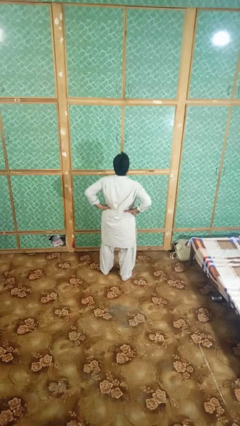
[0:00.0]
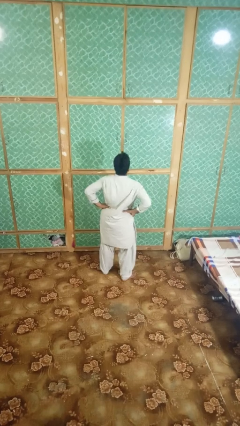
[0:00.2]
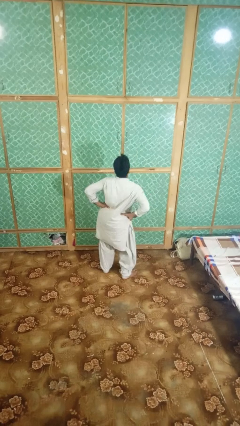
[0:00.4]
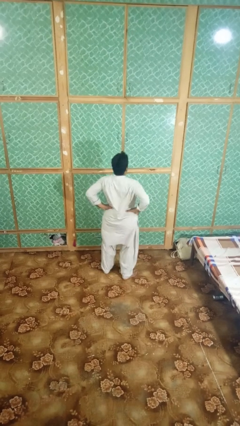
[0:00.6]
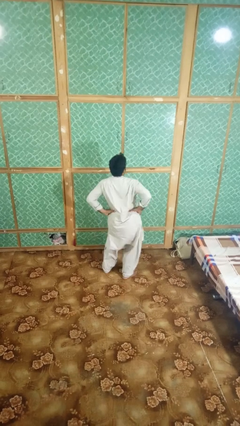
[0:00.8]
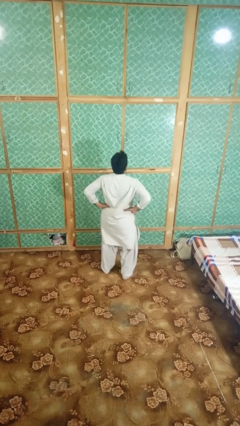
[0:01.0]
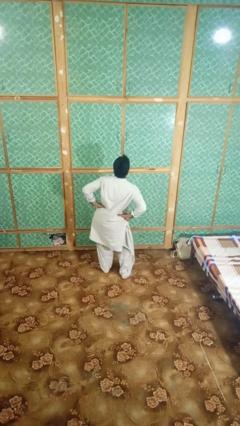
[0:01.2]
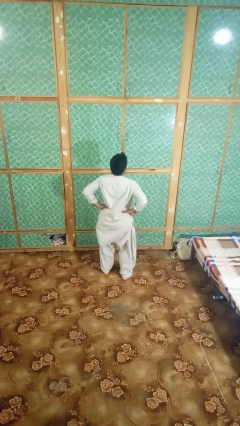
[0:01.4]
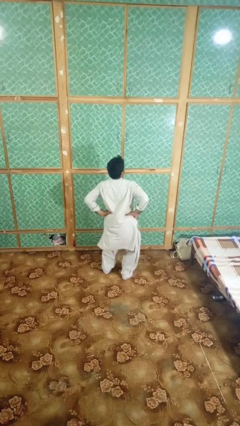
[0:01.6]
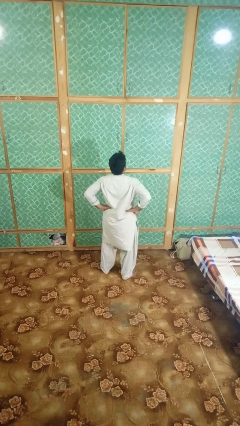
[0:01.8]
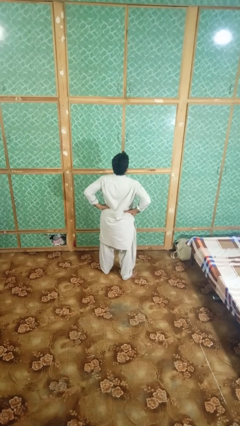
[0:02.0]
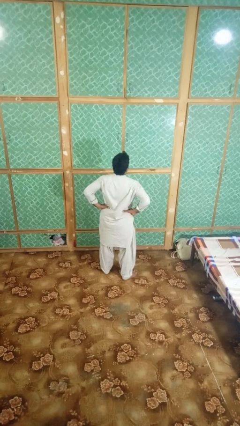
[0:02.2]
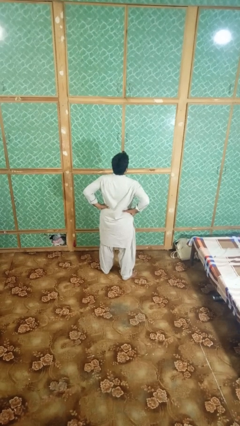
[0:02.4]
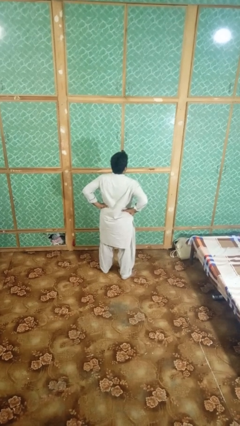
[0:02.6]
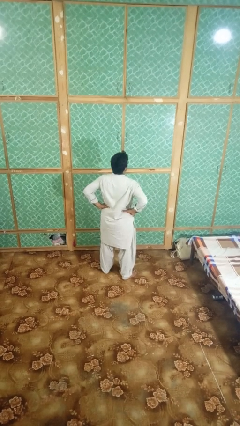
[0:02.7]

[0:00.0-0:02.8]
person wiggles hips

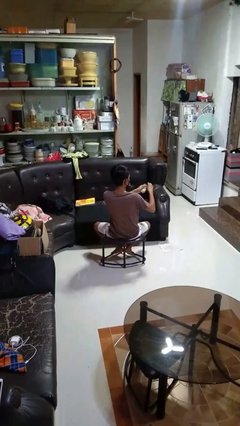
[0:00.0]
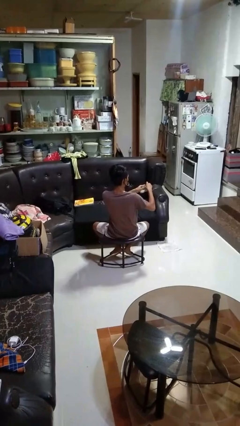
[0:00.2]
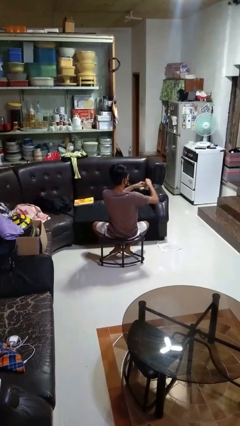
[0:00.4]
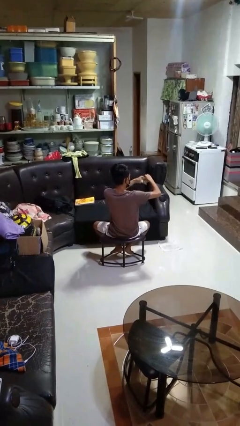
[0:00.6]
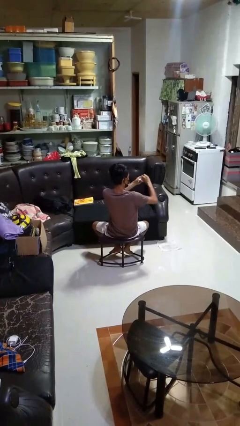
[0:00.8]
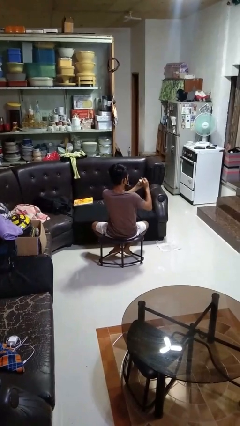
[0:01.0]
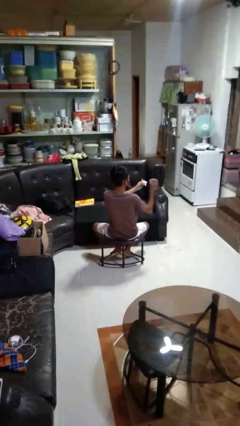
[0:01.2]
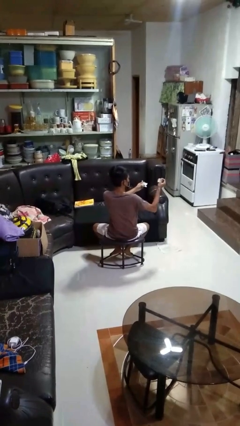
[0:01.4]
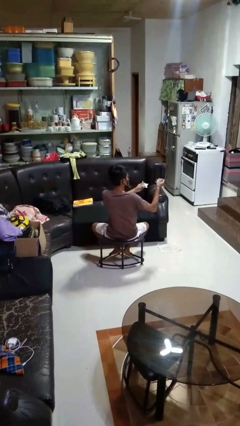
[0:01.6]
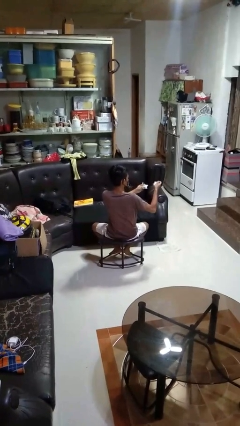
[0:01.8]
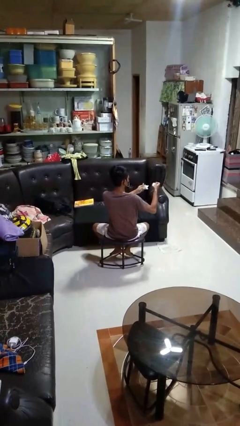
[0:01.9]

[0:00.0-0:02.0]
person tears paper

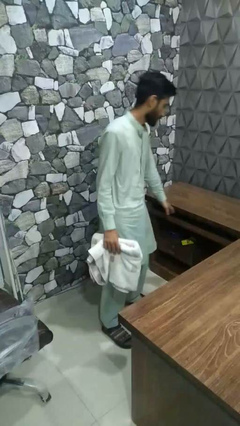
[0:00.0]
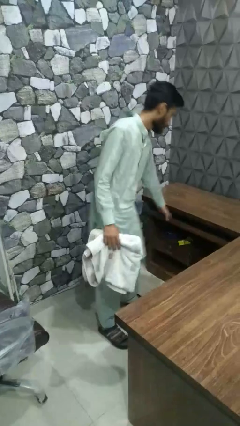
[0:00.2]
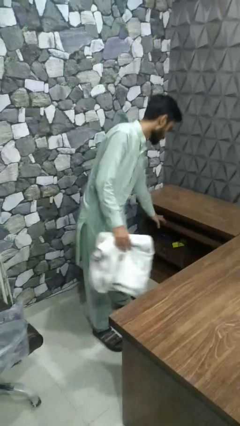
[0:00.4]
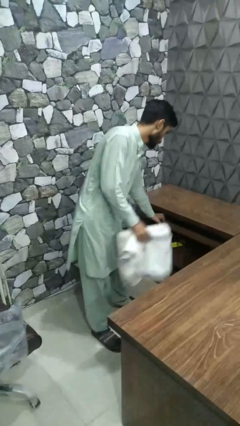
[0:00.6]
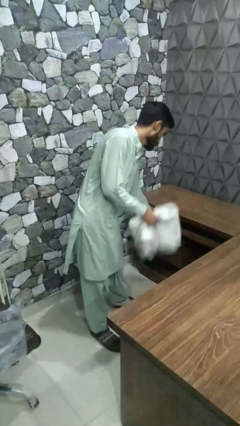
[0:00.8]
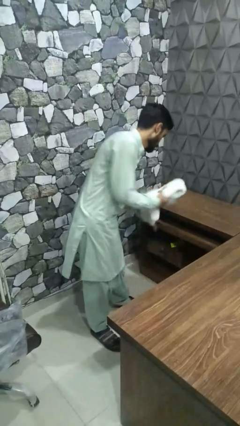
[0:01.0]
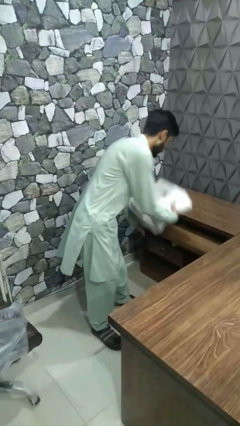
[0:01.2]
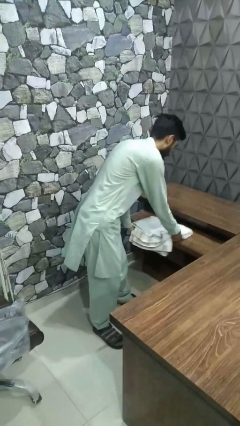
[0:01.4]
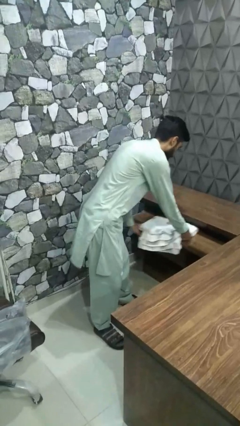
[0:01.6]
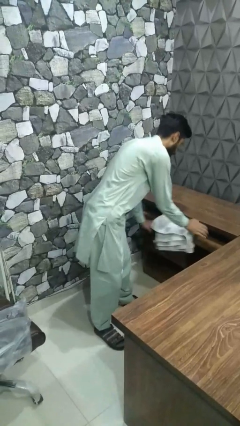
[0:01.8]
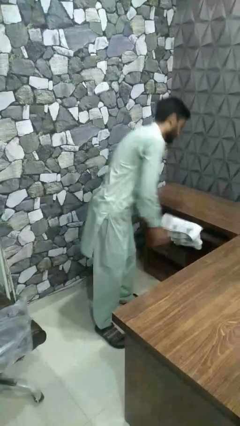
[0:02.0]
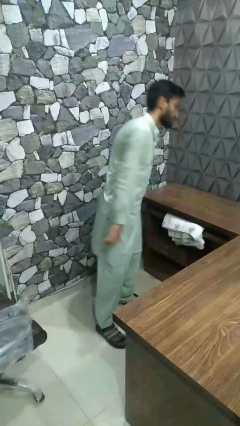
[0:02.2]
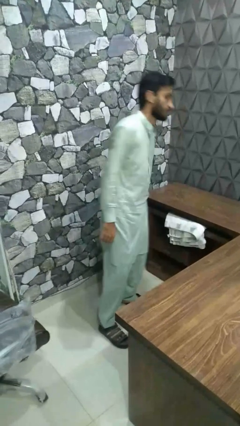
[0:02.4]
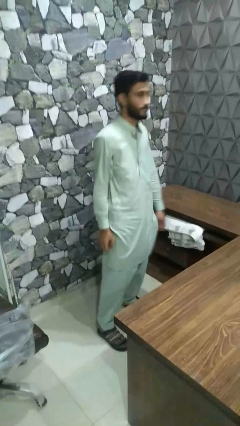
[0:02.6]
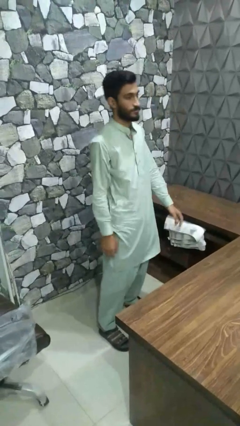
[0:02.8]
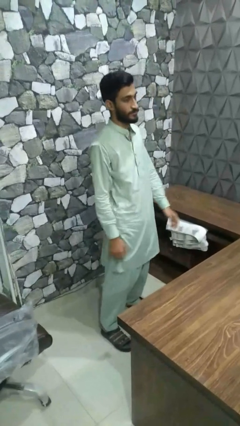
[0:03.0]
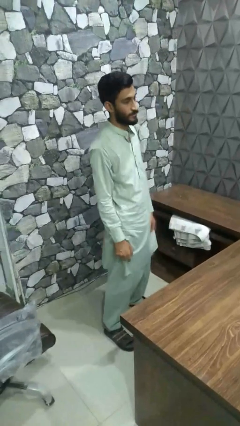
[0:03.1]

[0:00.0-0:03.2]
person puts clothes into dresser

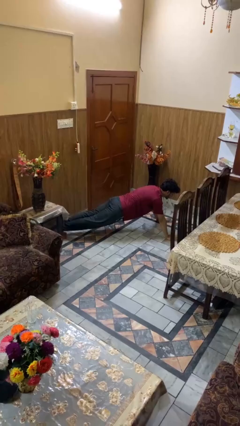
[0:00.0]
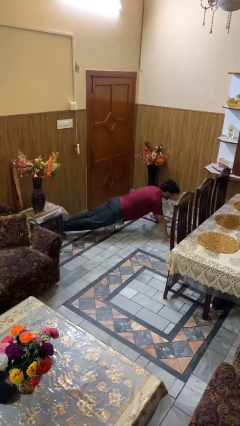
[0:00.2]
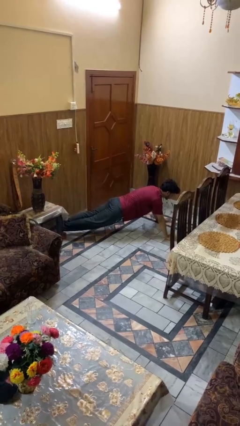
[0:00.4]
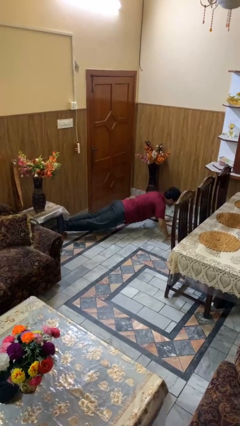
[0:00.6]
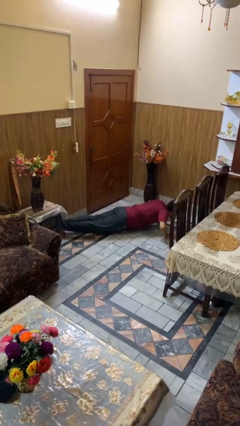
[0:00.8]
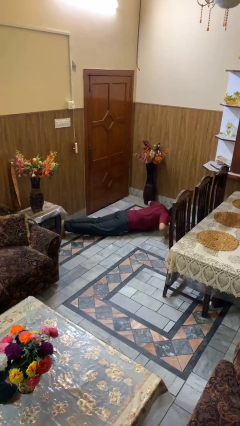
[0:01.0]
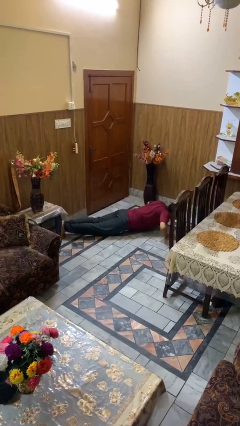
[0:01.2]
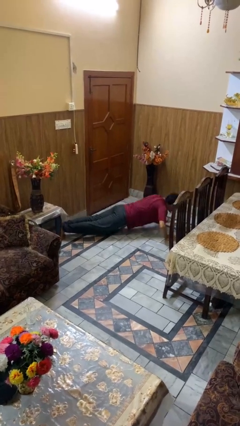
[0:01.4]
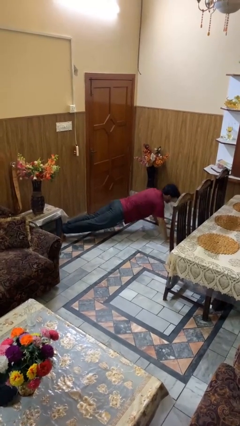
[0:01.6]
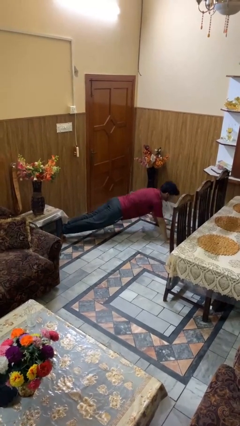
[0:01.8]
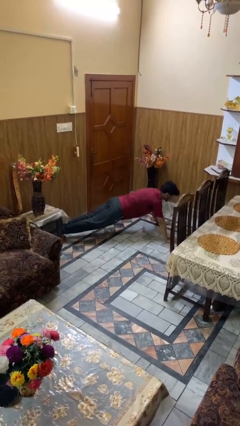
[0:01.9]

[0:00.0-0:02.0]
person exercises with pushup

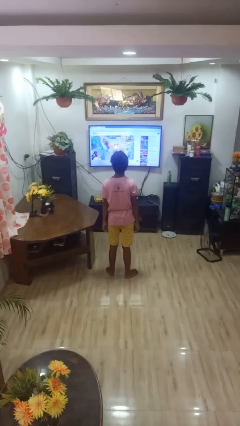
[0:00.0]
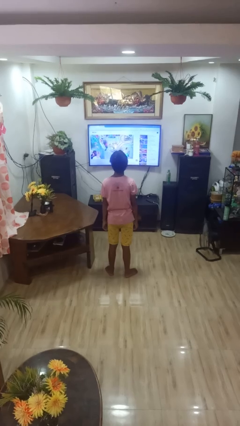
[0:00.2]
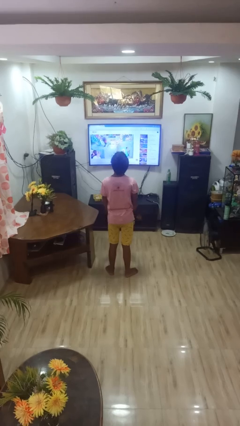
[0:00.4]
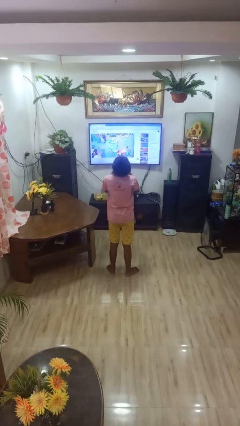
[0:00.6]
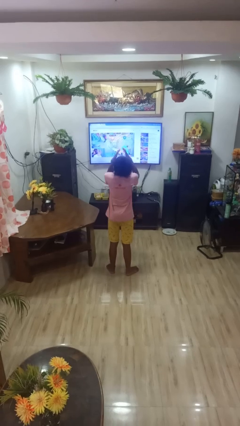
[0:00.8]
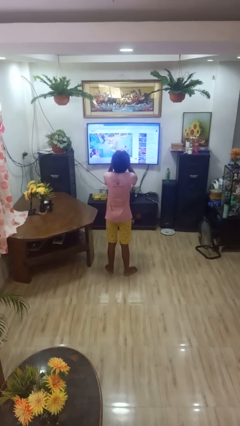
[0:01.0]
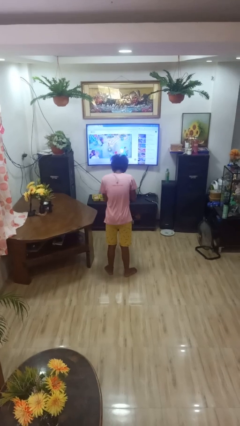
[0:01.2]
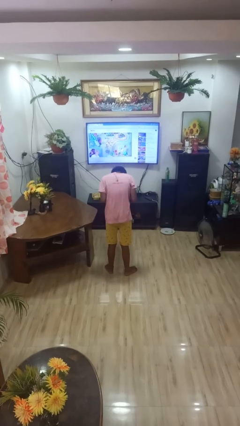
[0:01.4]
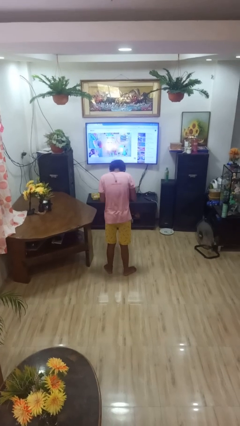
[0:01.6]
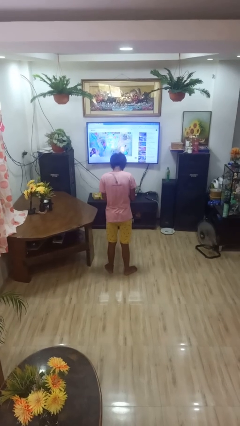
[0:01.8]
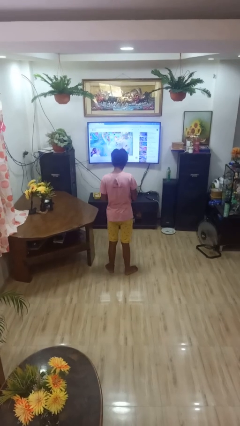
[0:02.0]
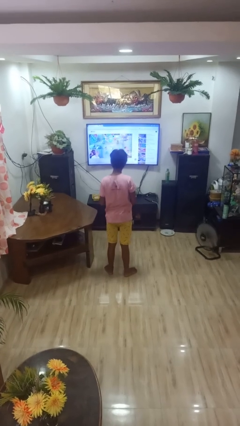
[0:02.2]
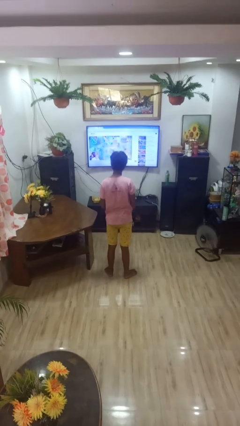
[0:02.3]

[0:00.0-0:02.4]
person sneezes into hand

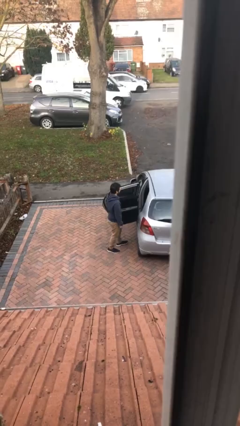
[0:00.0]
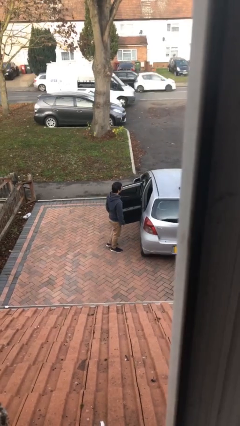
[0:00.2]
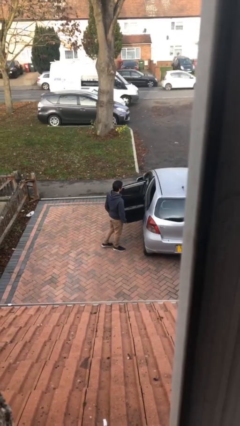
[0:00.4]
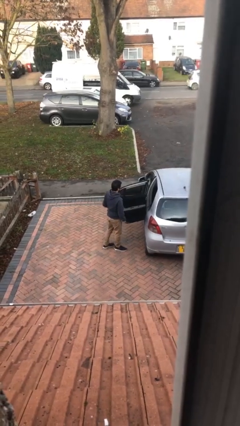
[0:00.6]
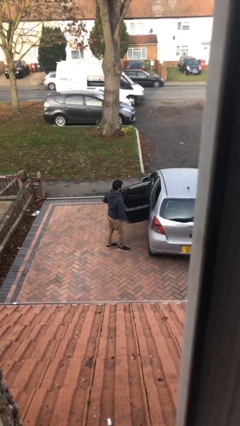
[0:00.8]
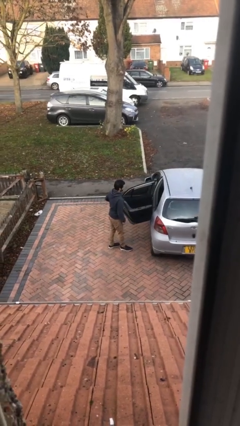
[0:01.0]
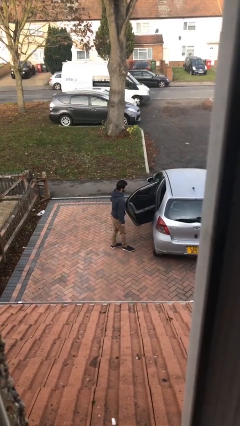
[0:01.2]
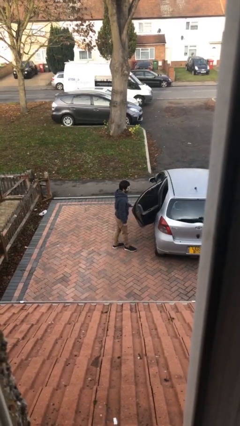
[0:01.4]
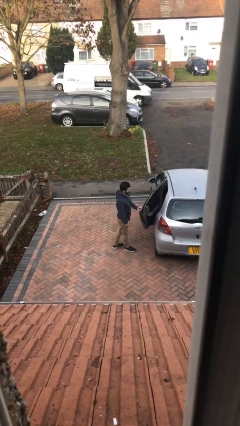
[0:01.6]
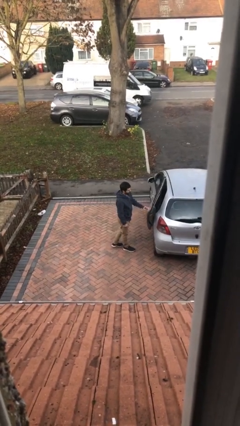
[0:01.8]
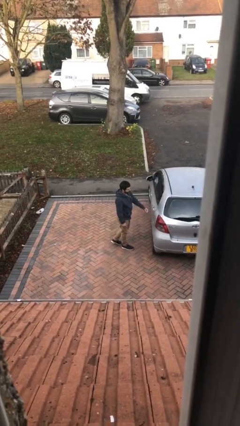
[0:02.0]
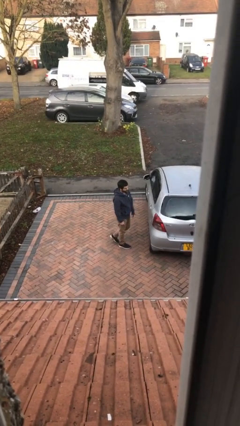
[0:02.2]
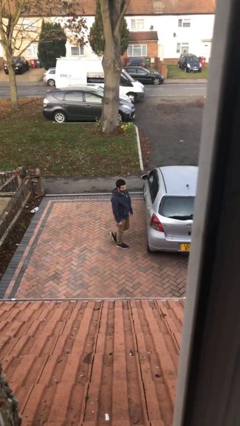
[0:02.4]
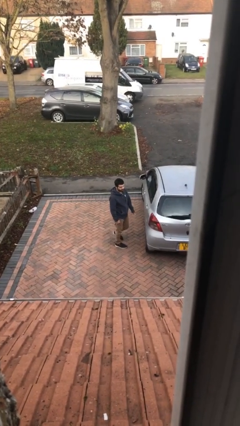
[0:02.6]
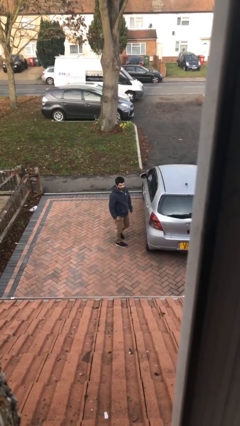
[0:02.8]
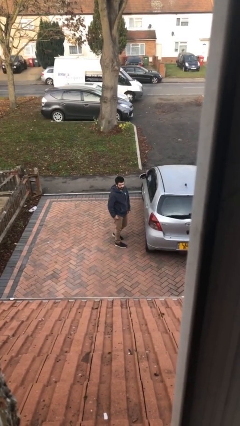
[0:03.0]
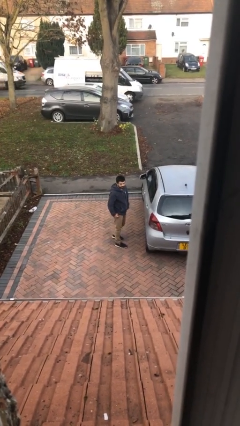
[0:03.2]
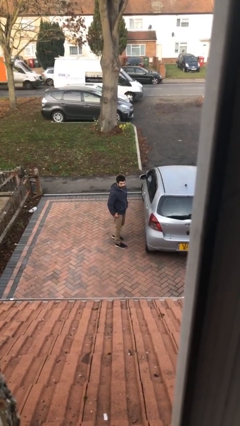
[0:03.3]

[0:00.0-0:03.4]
person closes car door

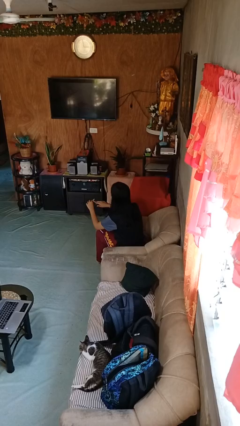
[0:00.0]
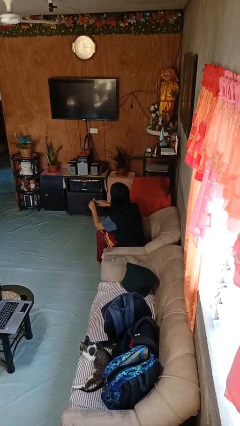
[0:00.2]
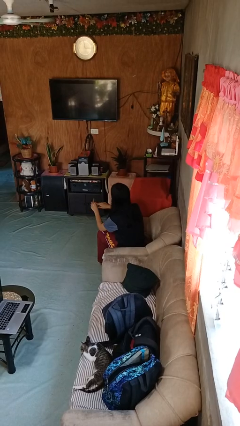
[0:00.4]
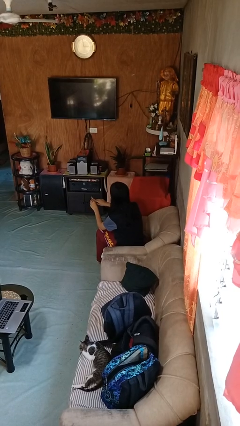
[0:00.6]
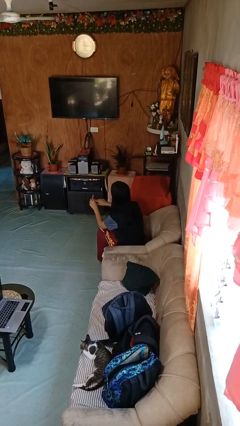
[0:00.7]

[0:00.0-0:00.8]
person files fingernails

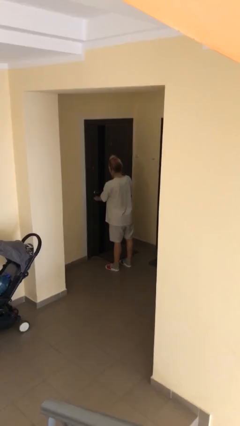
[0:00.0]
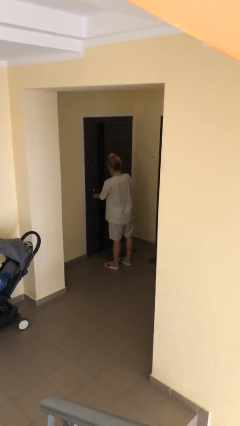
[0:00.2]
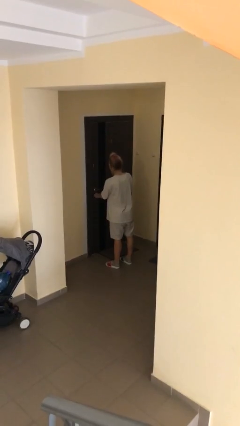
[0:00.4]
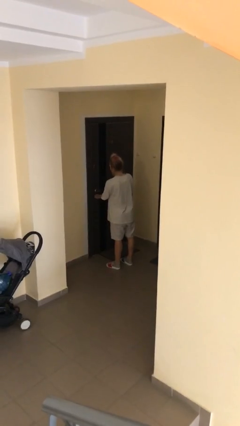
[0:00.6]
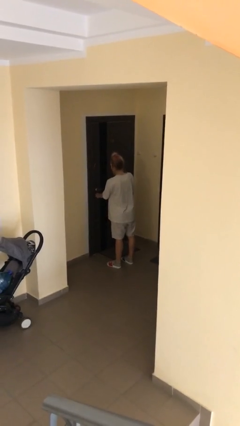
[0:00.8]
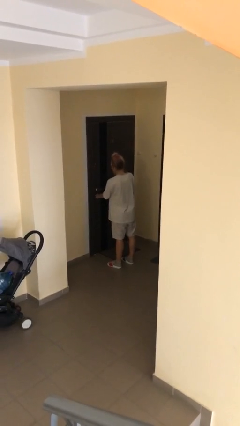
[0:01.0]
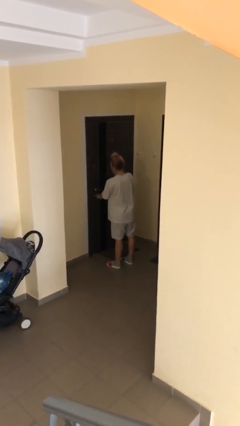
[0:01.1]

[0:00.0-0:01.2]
person locks door with keys
